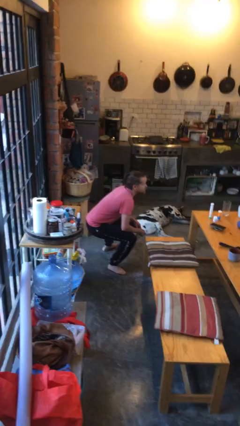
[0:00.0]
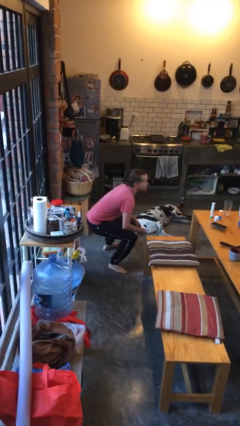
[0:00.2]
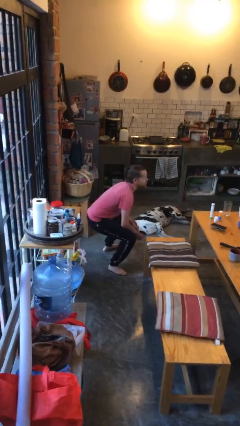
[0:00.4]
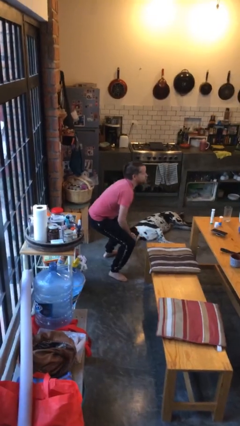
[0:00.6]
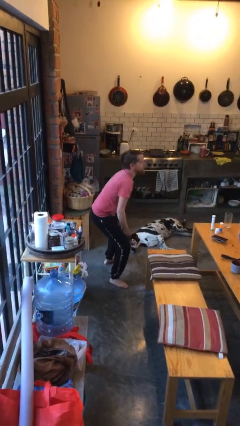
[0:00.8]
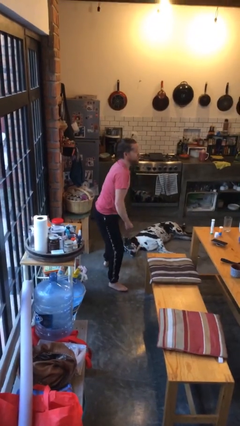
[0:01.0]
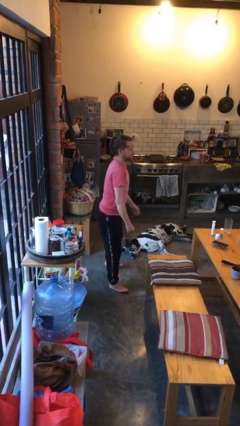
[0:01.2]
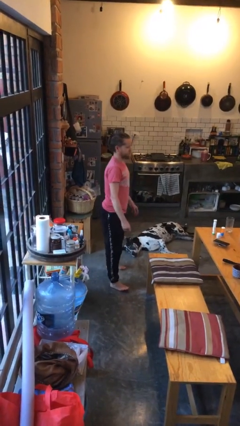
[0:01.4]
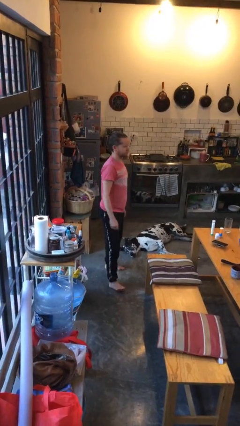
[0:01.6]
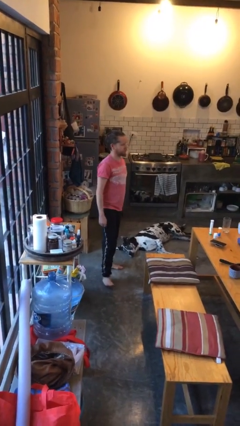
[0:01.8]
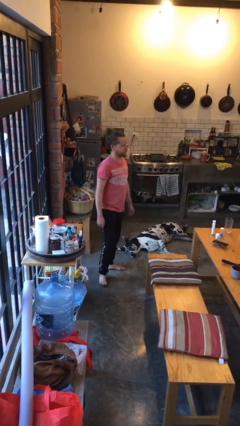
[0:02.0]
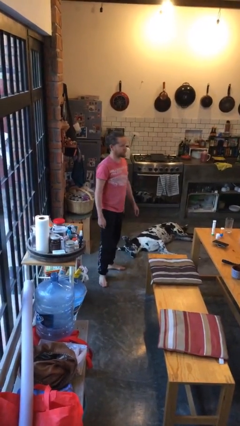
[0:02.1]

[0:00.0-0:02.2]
person stands up

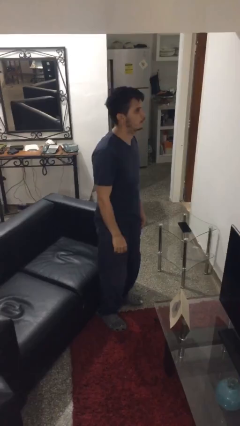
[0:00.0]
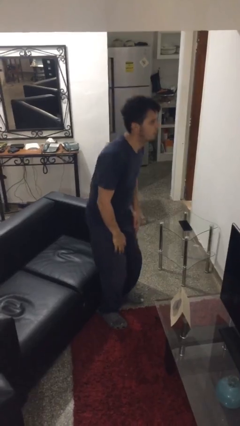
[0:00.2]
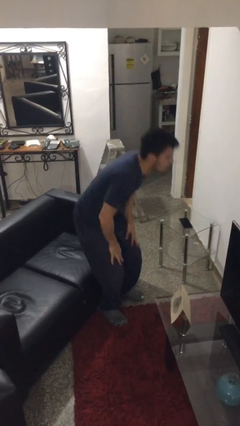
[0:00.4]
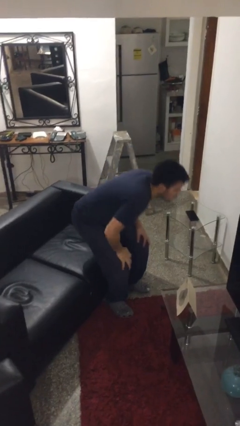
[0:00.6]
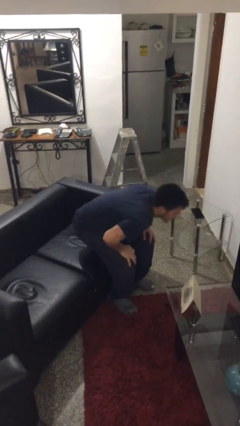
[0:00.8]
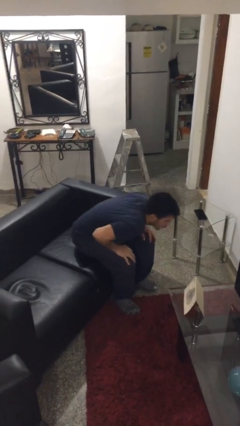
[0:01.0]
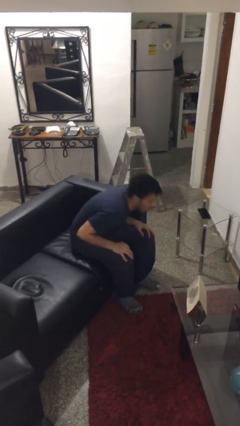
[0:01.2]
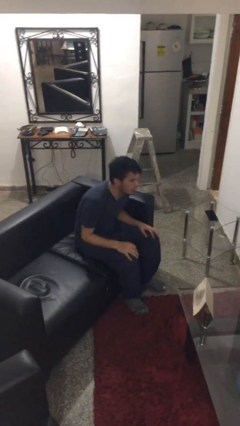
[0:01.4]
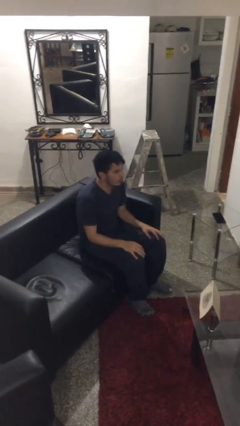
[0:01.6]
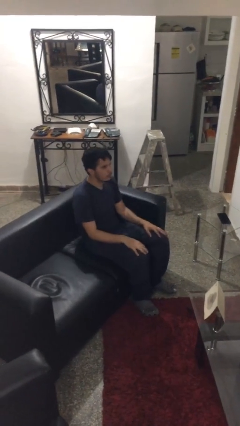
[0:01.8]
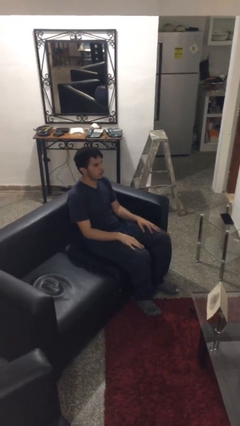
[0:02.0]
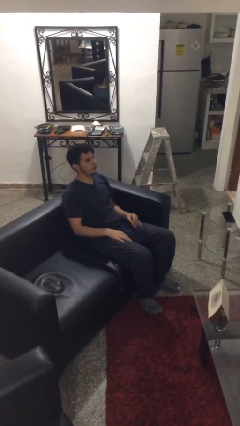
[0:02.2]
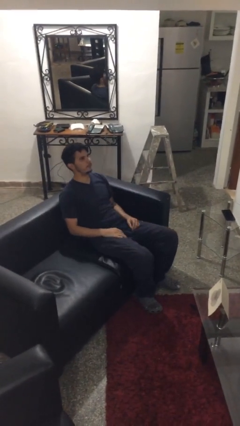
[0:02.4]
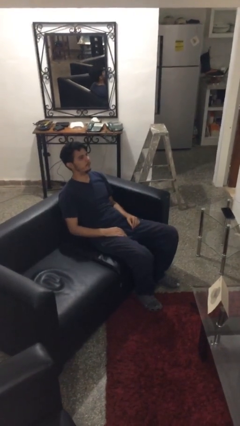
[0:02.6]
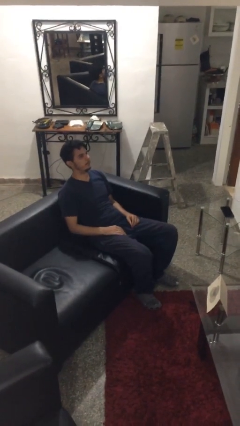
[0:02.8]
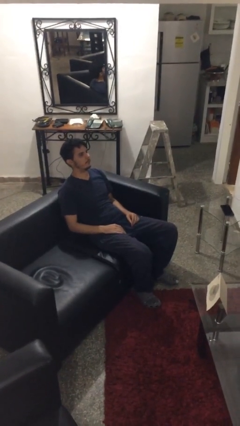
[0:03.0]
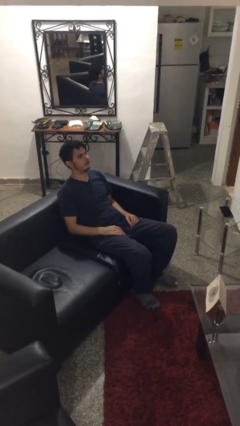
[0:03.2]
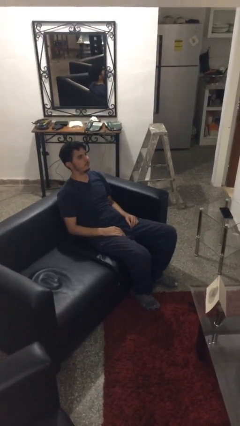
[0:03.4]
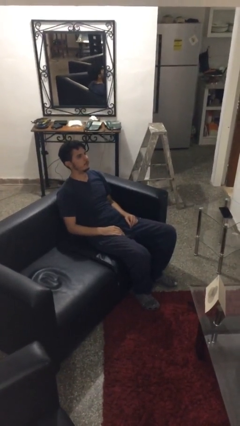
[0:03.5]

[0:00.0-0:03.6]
person lies down on couch

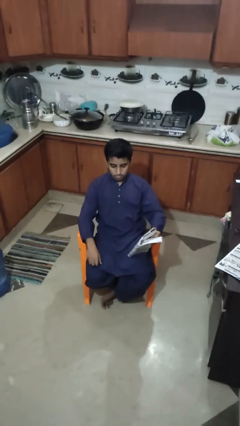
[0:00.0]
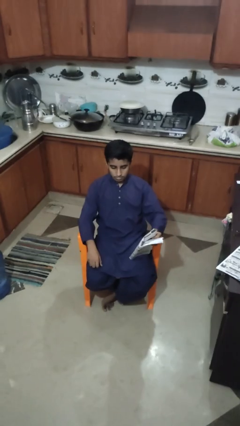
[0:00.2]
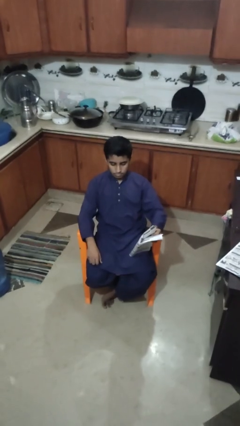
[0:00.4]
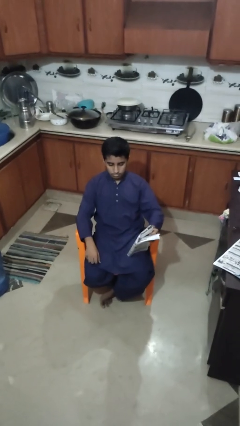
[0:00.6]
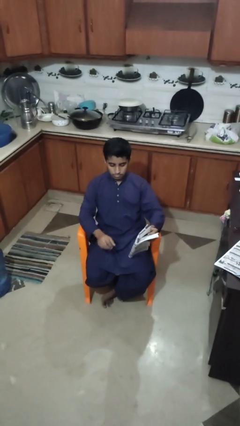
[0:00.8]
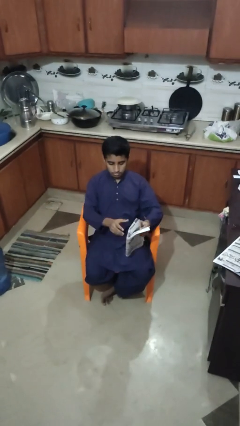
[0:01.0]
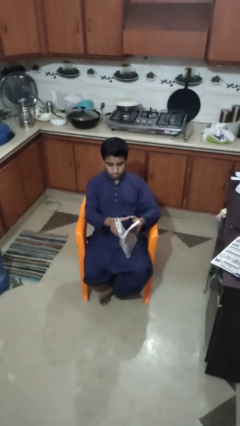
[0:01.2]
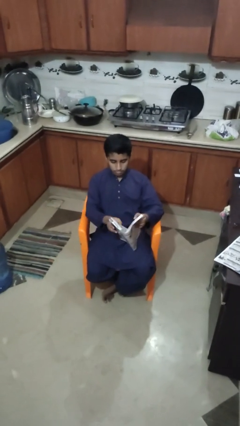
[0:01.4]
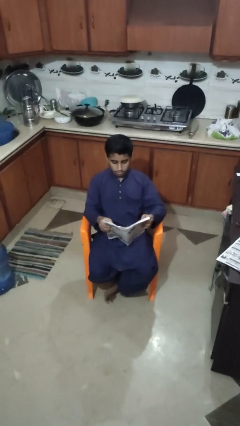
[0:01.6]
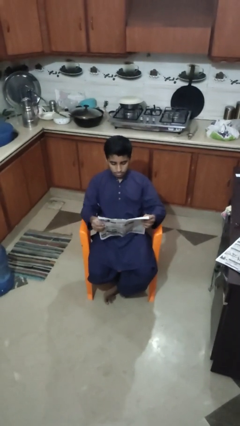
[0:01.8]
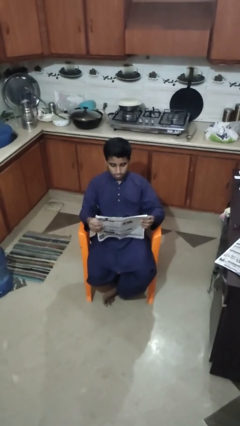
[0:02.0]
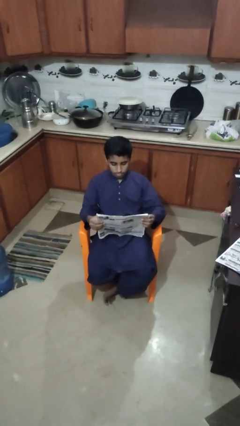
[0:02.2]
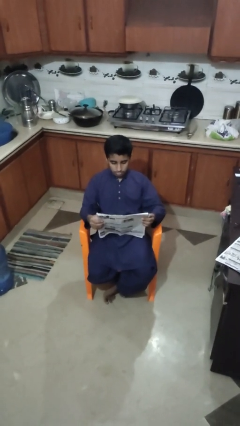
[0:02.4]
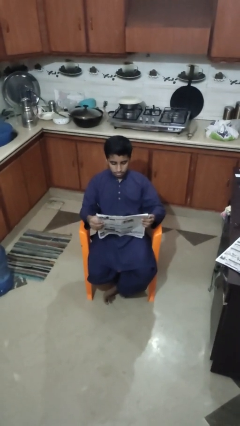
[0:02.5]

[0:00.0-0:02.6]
person reads newspaper

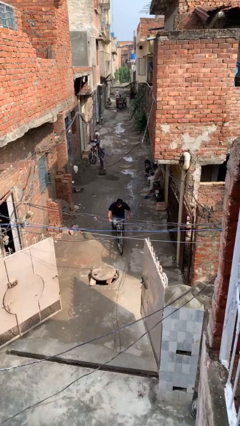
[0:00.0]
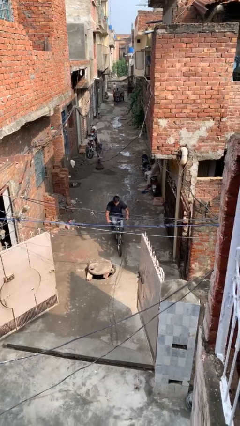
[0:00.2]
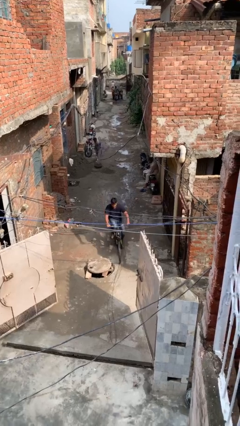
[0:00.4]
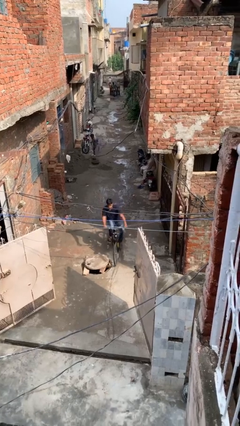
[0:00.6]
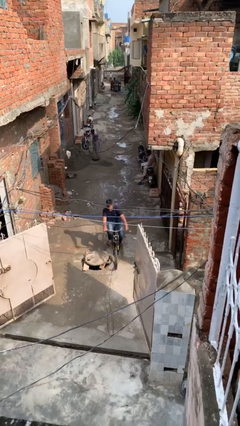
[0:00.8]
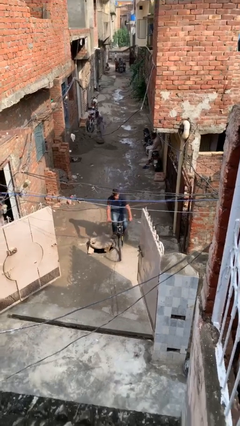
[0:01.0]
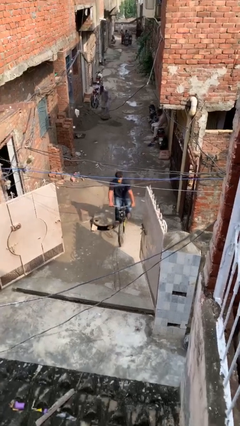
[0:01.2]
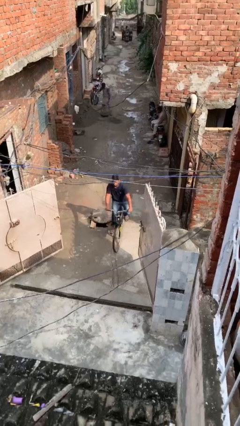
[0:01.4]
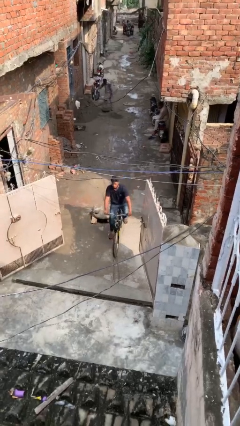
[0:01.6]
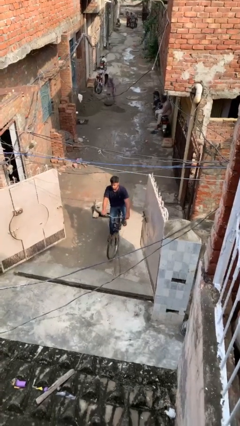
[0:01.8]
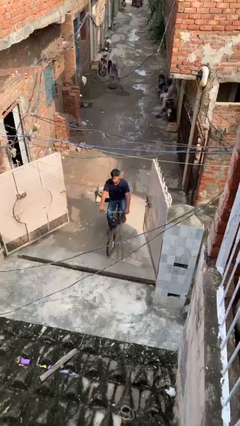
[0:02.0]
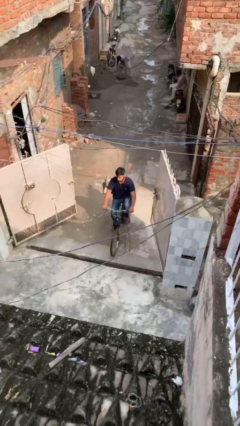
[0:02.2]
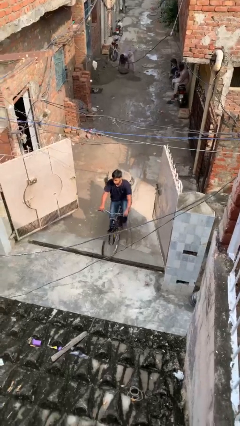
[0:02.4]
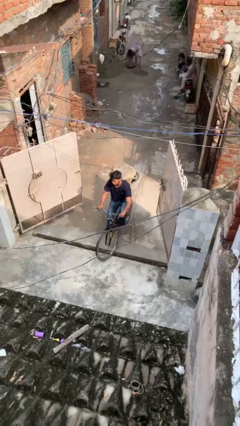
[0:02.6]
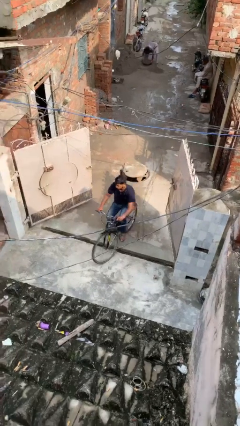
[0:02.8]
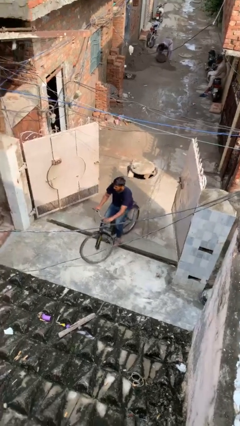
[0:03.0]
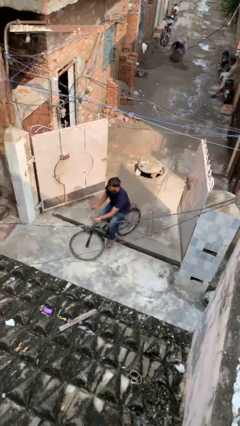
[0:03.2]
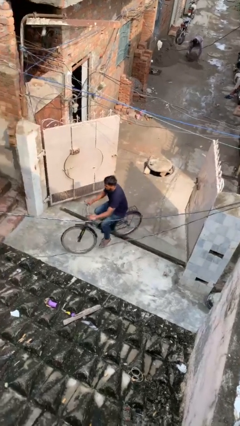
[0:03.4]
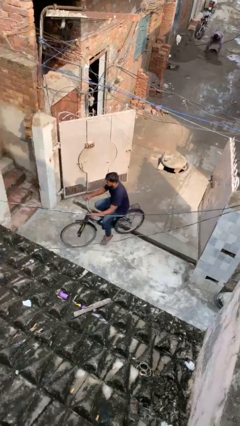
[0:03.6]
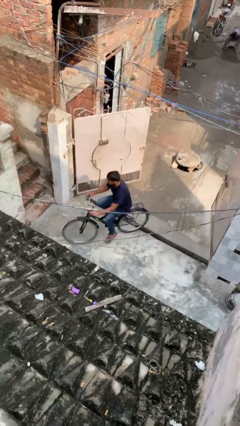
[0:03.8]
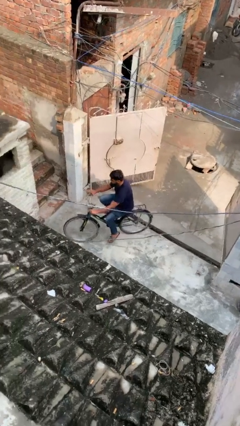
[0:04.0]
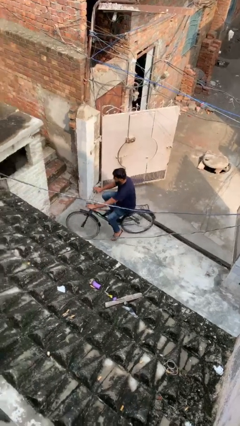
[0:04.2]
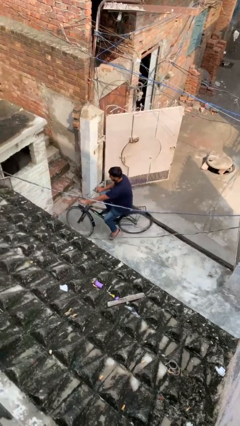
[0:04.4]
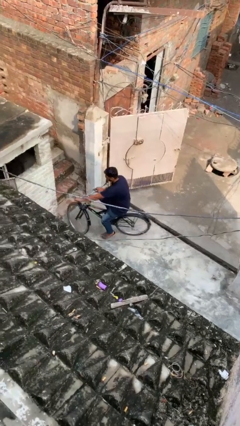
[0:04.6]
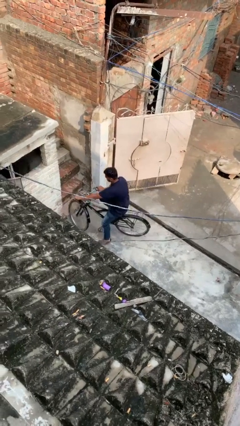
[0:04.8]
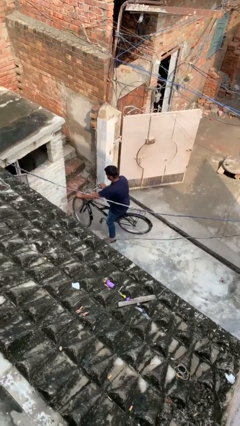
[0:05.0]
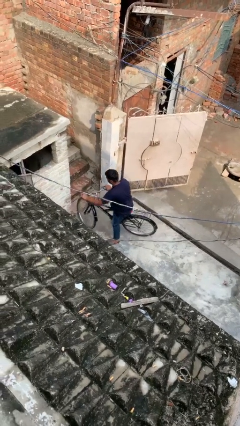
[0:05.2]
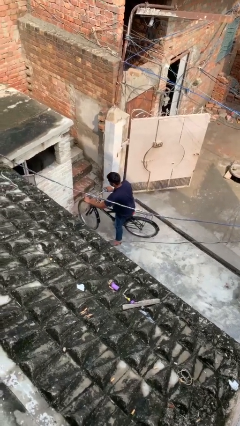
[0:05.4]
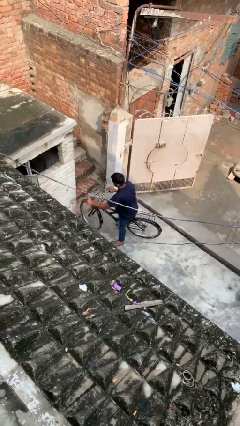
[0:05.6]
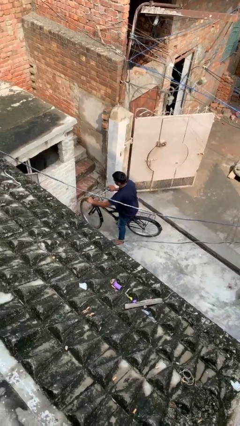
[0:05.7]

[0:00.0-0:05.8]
person rides bicycle

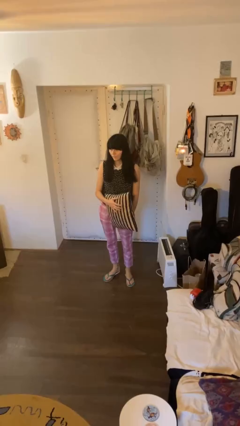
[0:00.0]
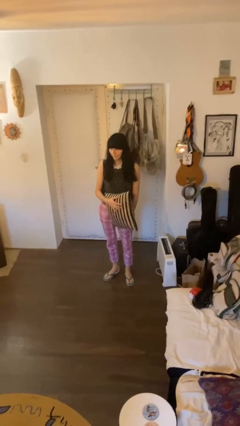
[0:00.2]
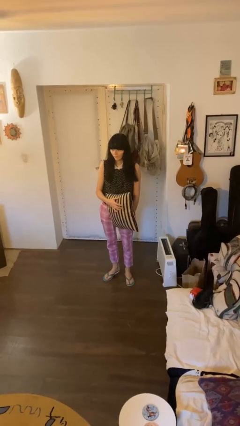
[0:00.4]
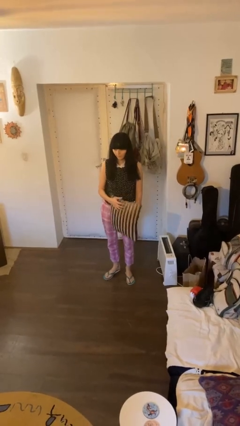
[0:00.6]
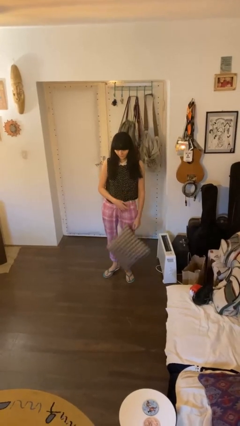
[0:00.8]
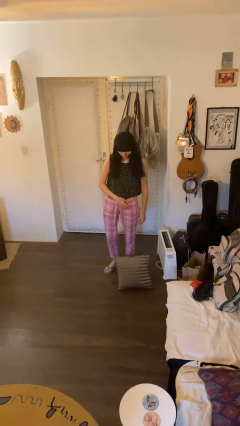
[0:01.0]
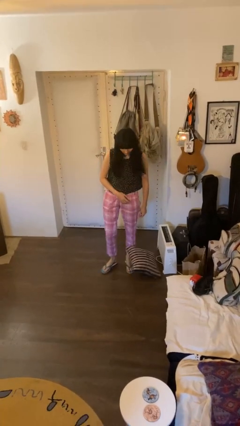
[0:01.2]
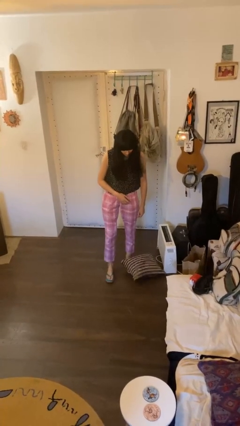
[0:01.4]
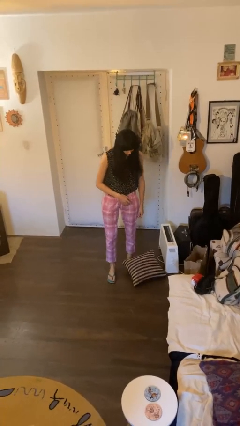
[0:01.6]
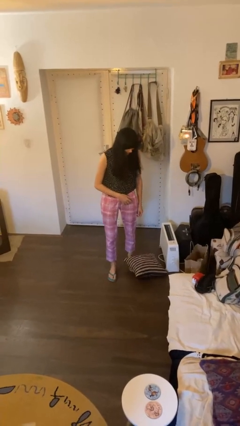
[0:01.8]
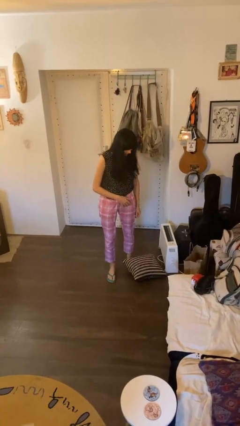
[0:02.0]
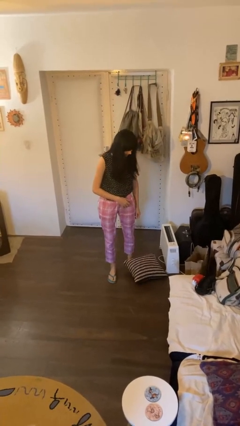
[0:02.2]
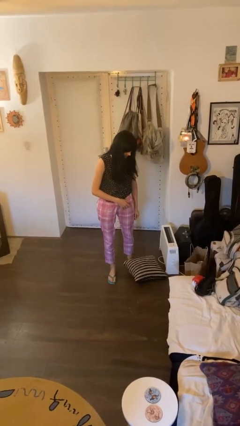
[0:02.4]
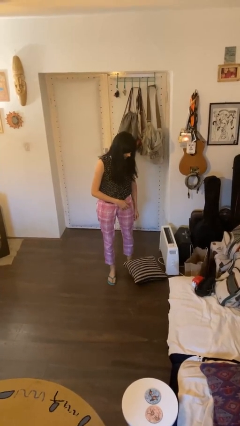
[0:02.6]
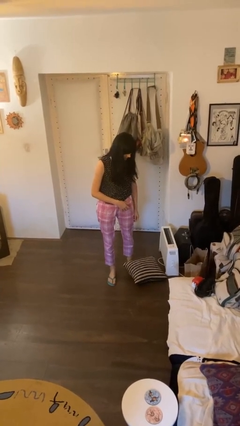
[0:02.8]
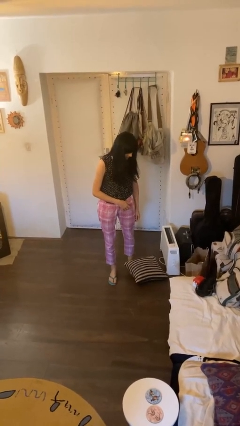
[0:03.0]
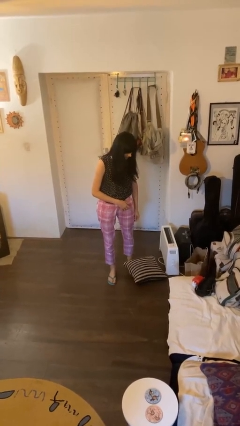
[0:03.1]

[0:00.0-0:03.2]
person drops object
